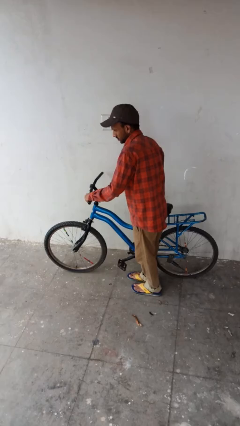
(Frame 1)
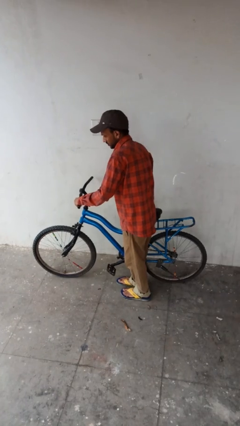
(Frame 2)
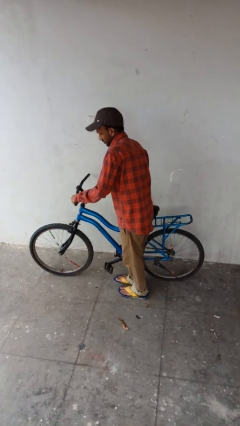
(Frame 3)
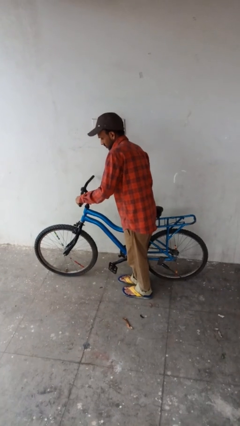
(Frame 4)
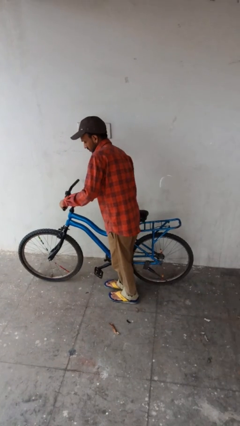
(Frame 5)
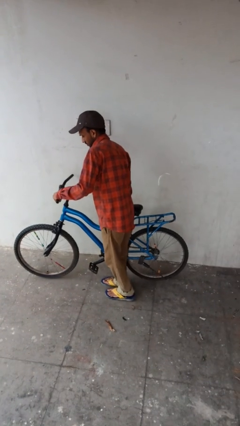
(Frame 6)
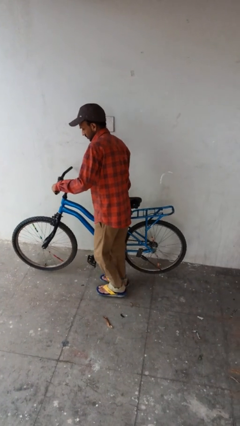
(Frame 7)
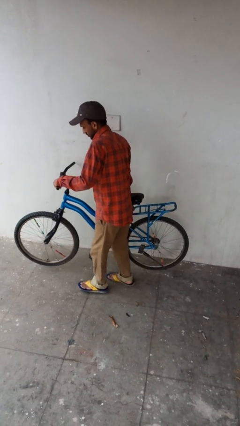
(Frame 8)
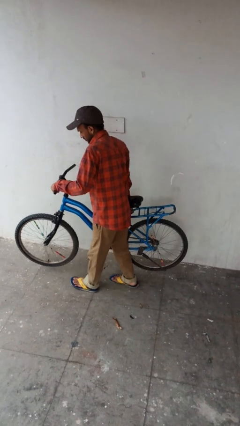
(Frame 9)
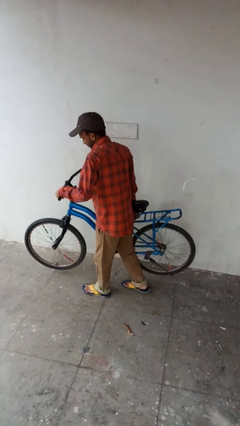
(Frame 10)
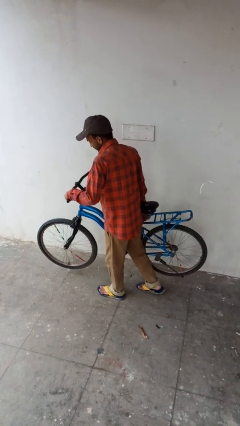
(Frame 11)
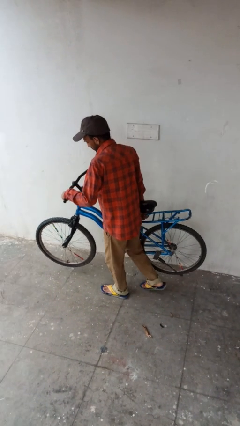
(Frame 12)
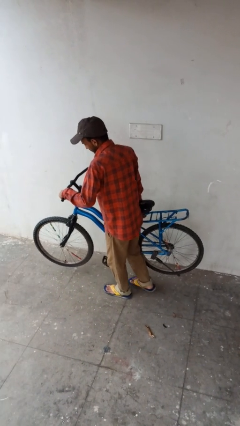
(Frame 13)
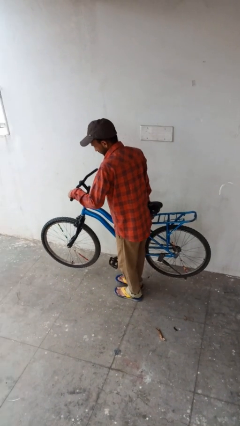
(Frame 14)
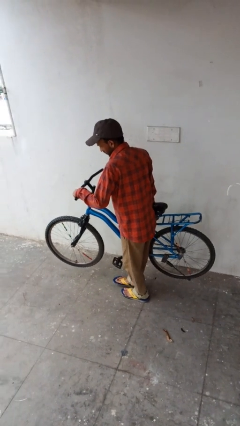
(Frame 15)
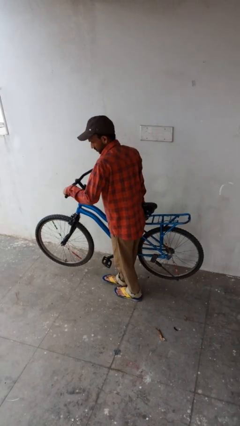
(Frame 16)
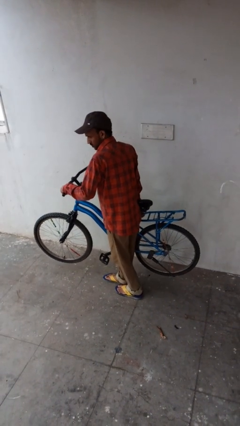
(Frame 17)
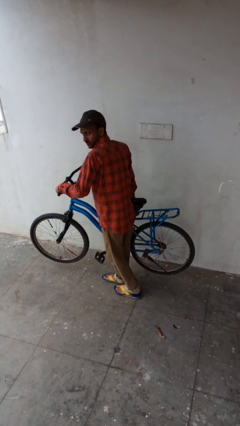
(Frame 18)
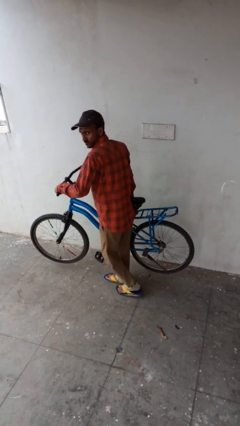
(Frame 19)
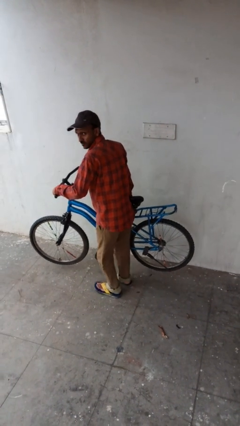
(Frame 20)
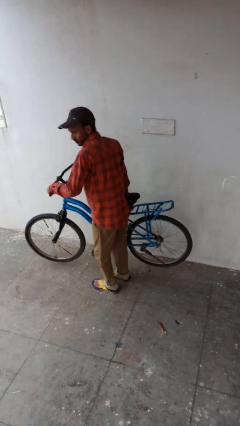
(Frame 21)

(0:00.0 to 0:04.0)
person carries bicycle

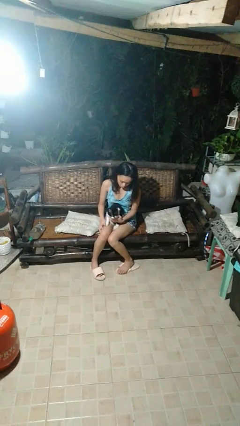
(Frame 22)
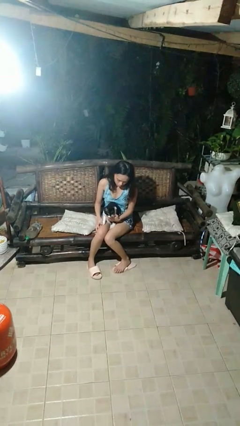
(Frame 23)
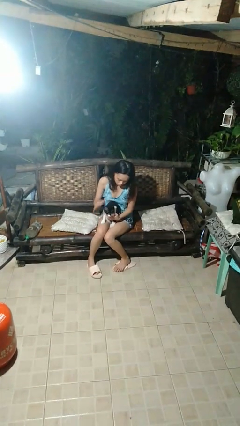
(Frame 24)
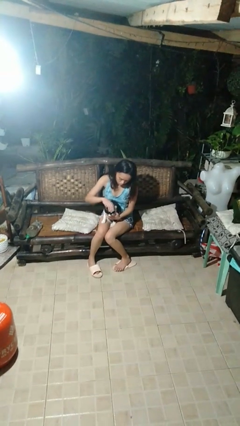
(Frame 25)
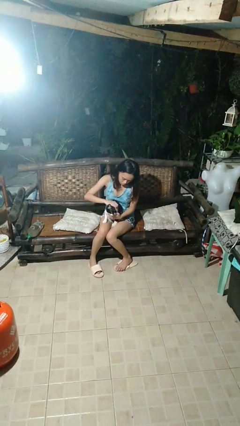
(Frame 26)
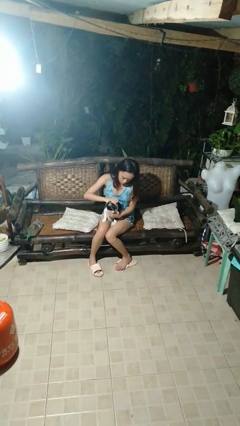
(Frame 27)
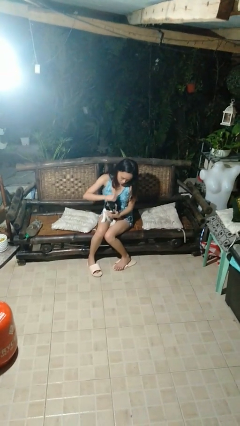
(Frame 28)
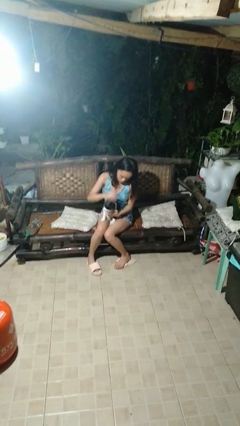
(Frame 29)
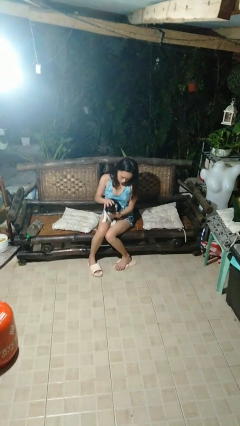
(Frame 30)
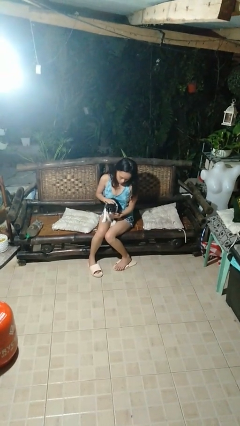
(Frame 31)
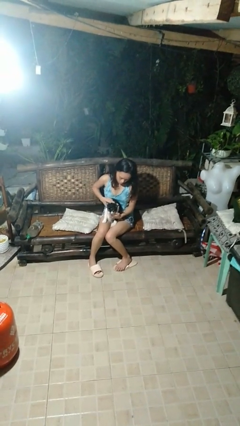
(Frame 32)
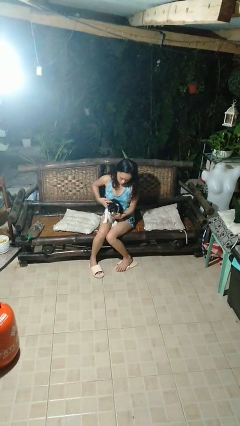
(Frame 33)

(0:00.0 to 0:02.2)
person pets cat

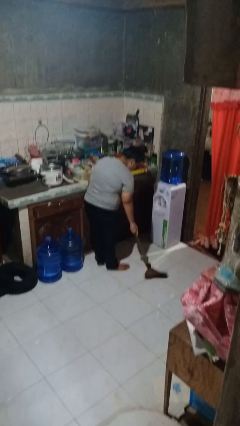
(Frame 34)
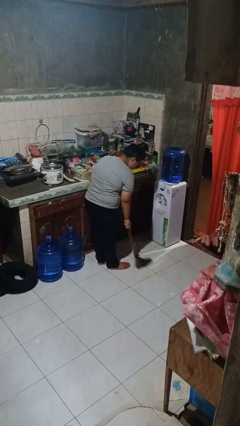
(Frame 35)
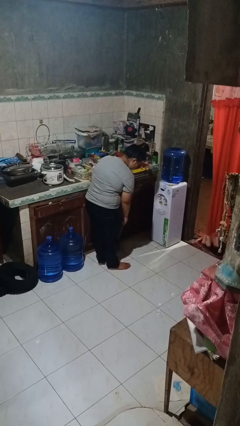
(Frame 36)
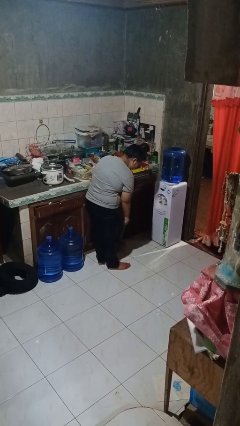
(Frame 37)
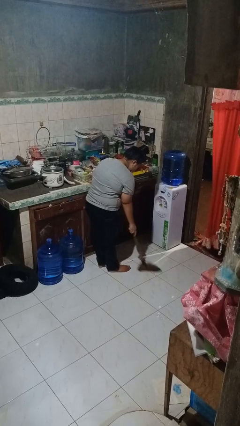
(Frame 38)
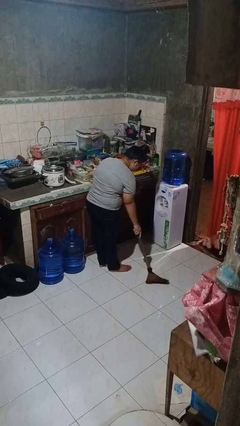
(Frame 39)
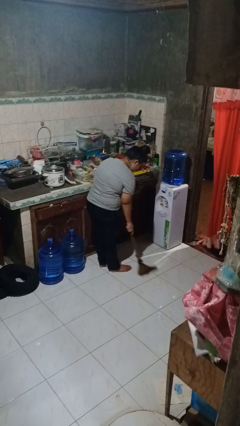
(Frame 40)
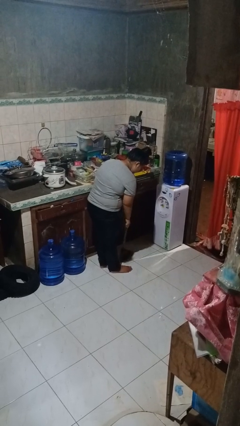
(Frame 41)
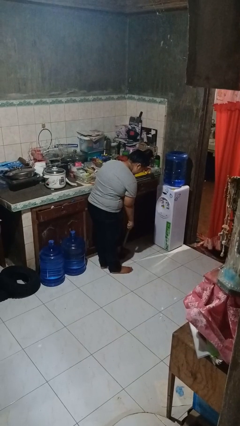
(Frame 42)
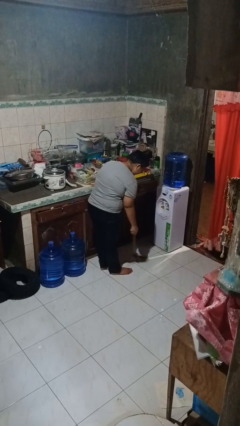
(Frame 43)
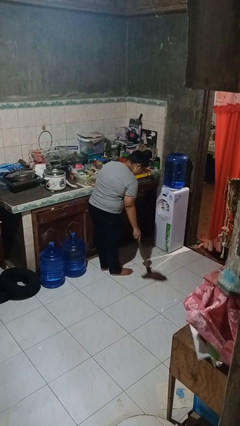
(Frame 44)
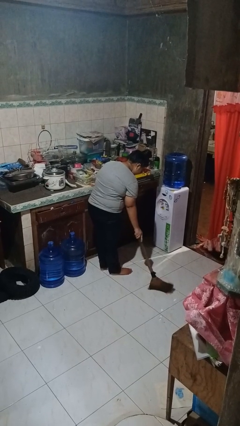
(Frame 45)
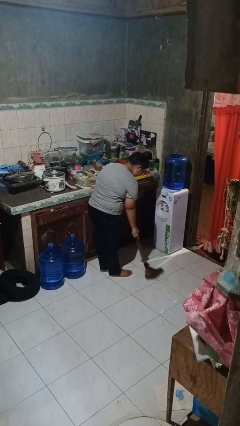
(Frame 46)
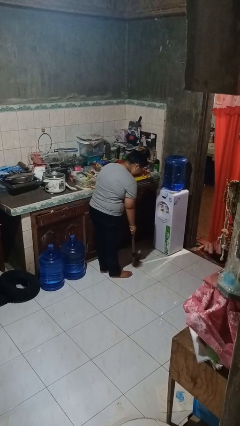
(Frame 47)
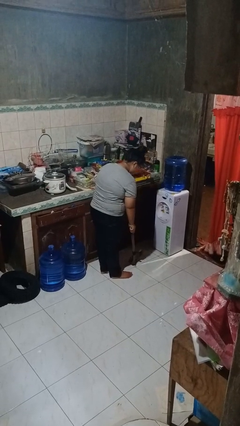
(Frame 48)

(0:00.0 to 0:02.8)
person sweeps floor

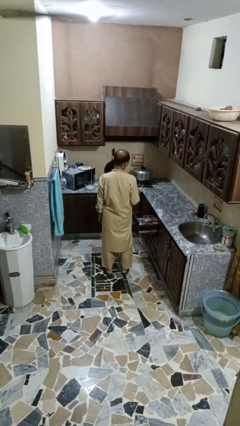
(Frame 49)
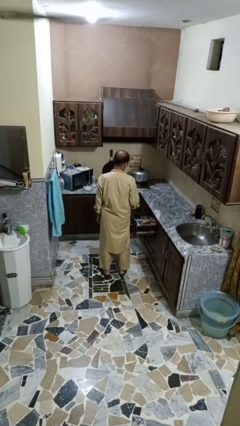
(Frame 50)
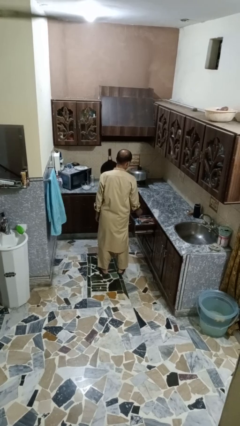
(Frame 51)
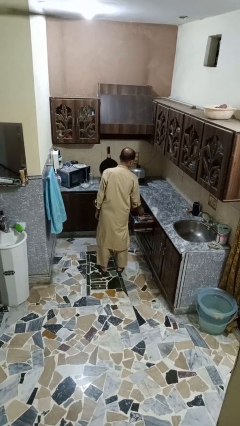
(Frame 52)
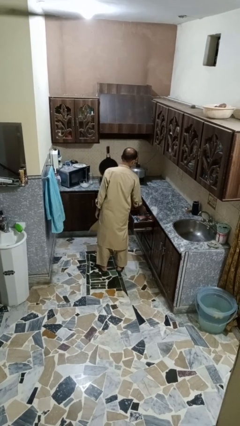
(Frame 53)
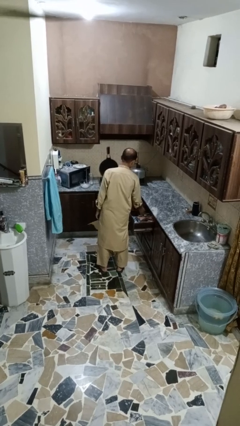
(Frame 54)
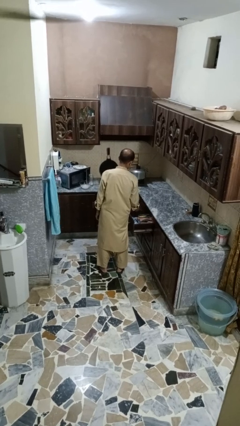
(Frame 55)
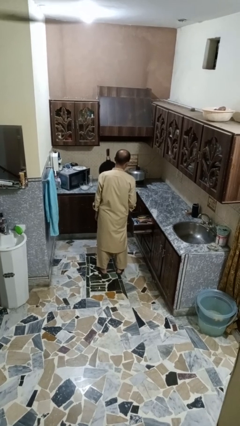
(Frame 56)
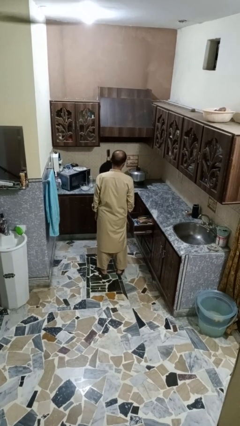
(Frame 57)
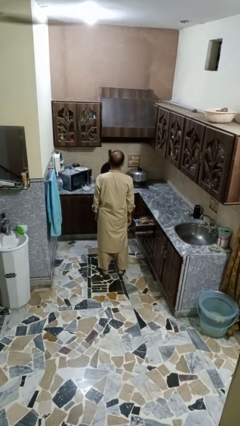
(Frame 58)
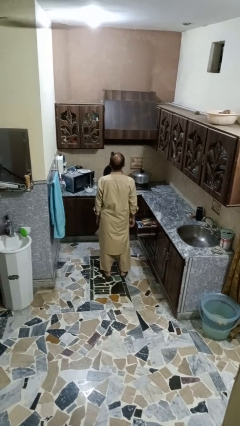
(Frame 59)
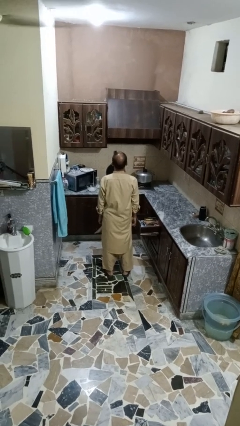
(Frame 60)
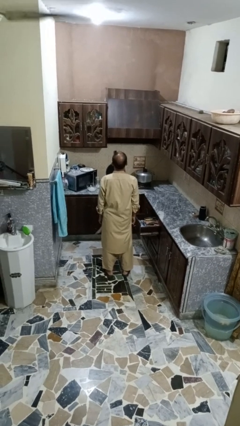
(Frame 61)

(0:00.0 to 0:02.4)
person puts object into kitchen drawer

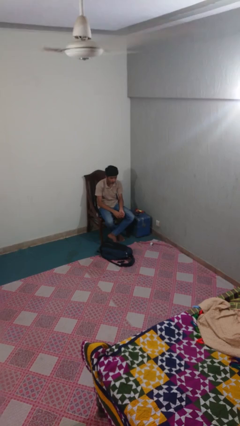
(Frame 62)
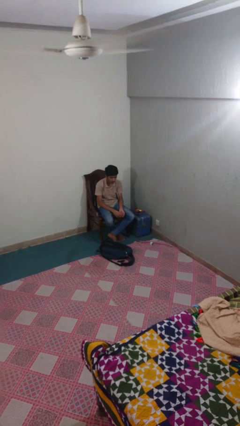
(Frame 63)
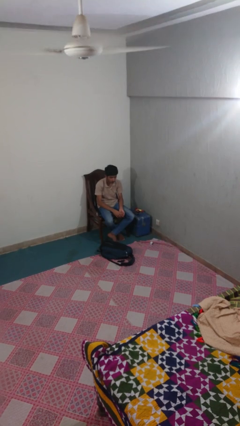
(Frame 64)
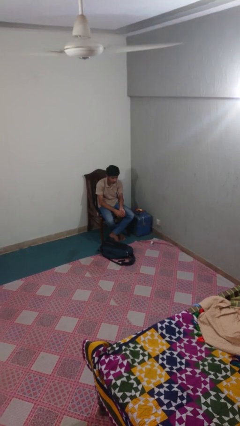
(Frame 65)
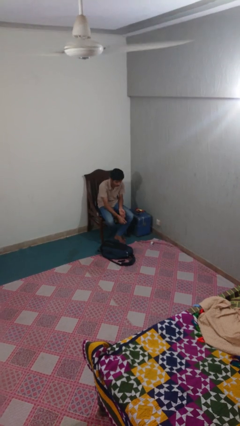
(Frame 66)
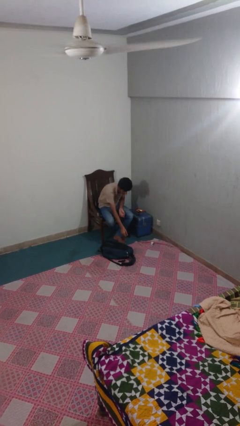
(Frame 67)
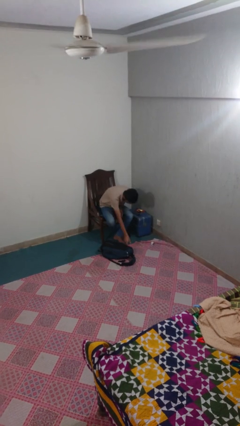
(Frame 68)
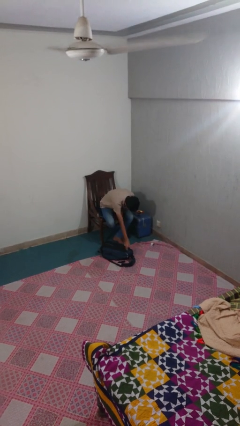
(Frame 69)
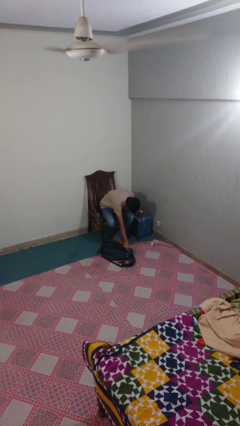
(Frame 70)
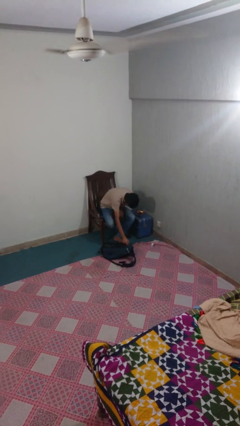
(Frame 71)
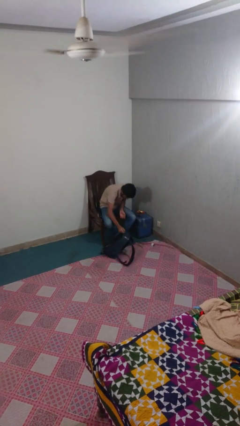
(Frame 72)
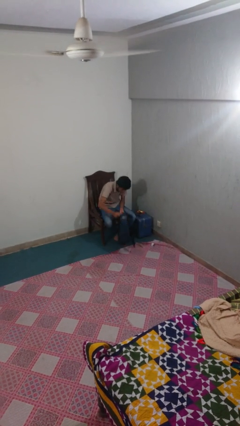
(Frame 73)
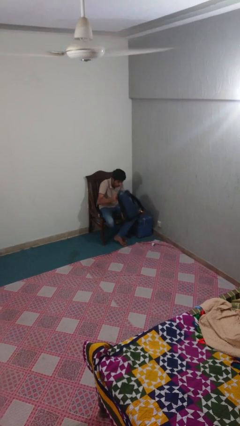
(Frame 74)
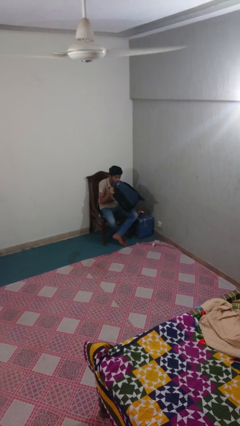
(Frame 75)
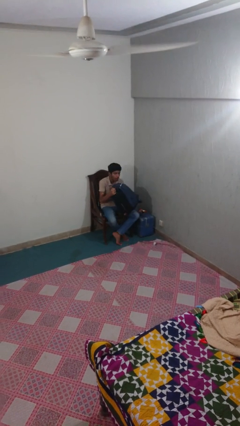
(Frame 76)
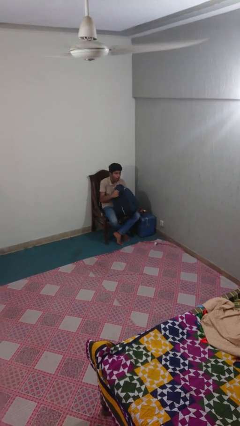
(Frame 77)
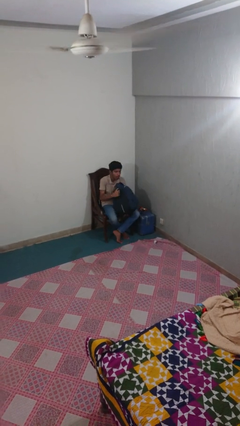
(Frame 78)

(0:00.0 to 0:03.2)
person picks up object from floor

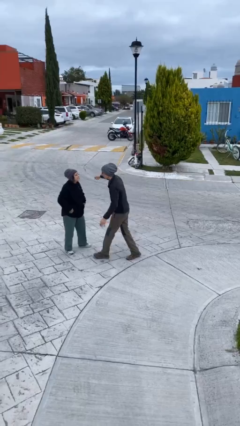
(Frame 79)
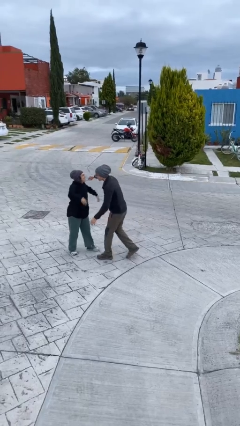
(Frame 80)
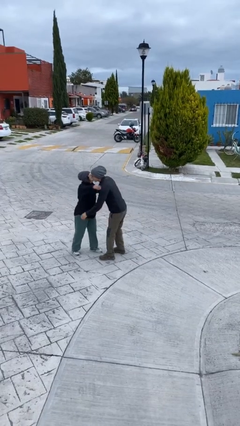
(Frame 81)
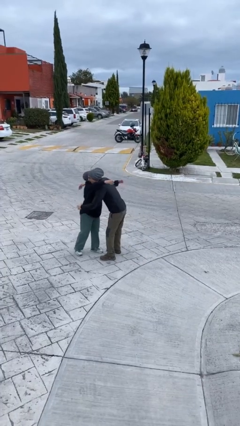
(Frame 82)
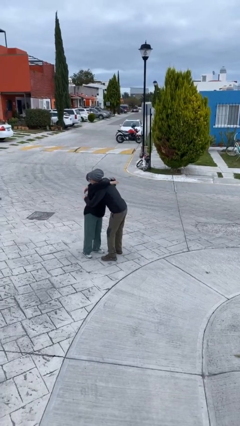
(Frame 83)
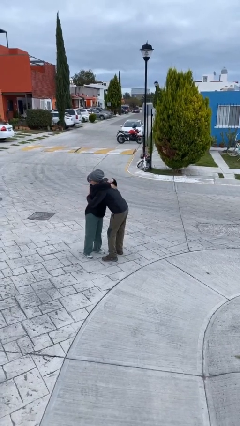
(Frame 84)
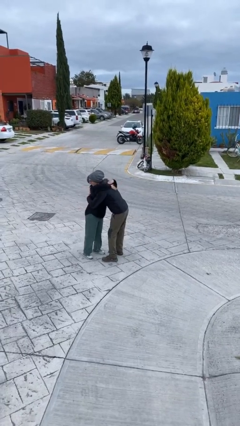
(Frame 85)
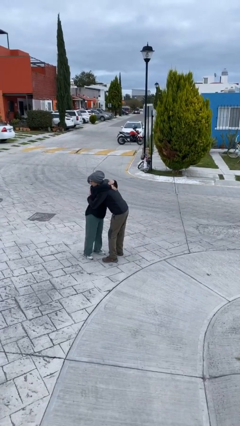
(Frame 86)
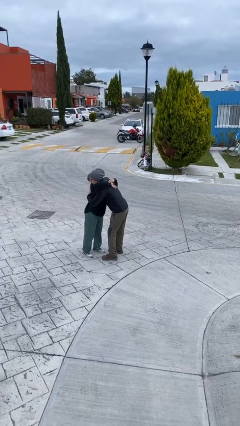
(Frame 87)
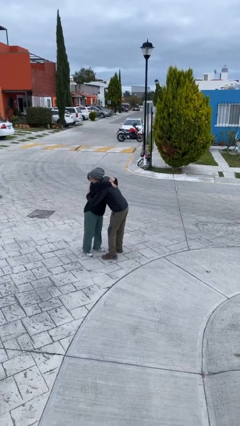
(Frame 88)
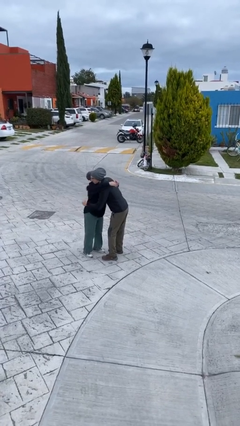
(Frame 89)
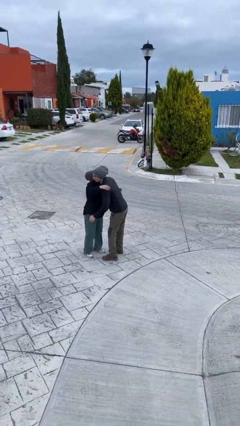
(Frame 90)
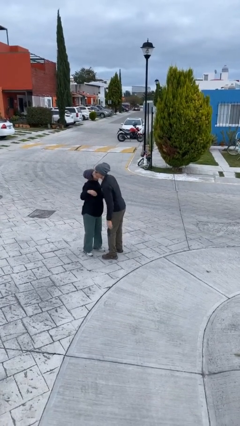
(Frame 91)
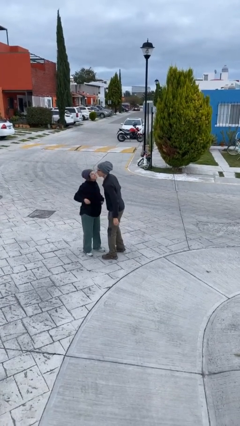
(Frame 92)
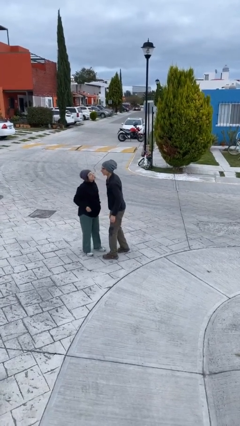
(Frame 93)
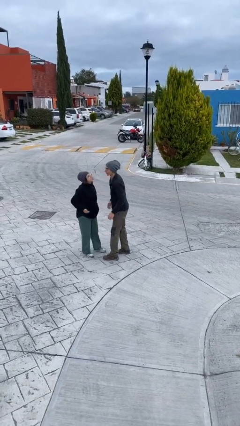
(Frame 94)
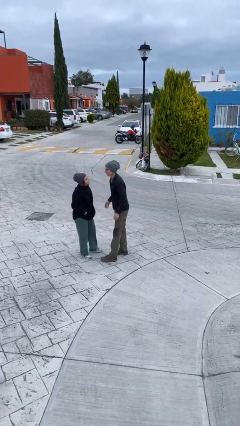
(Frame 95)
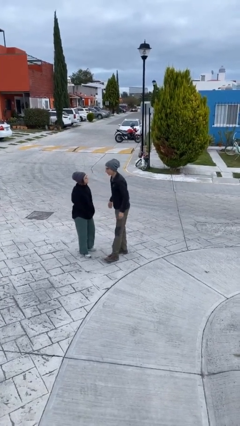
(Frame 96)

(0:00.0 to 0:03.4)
person embraces person
